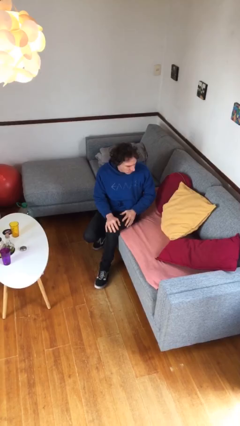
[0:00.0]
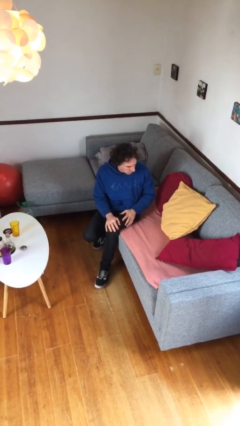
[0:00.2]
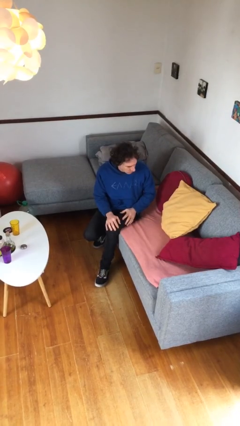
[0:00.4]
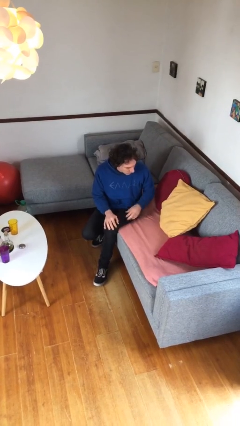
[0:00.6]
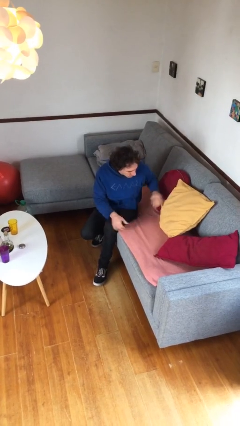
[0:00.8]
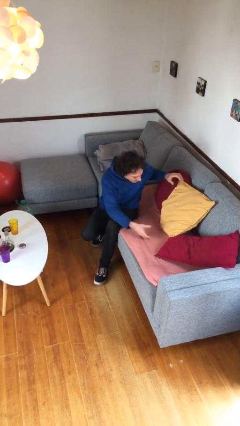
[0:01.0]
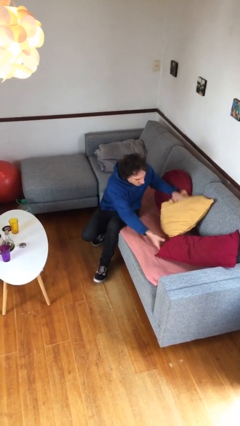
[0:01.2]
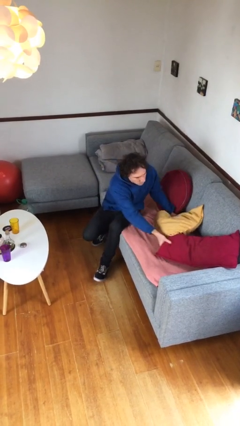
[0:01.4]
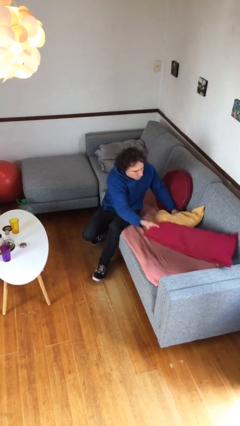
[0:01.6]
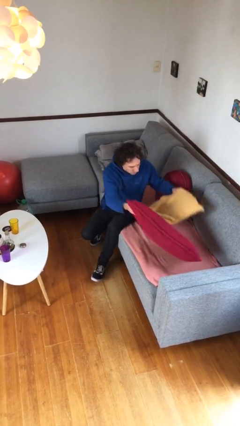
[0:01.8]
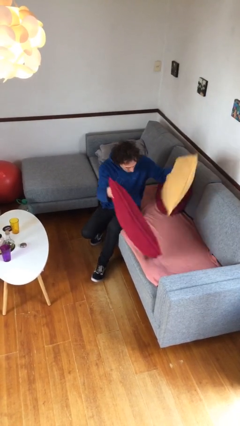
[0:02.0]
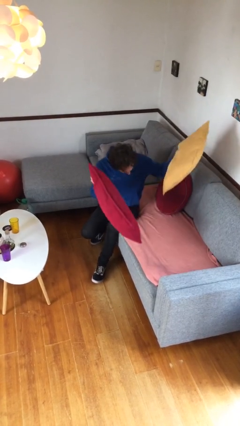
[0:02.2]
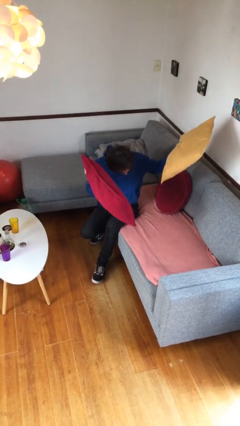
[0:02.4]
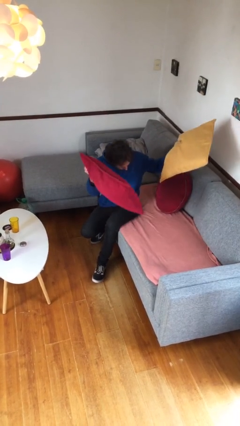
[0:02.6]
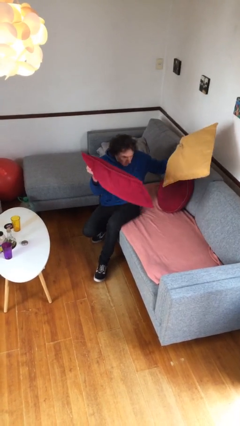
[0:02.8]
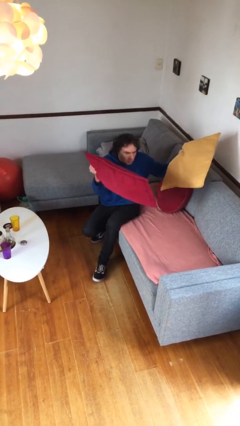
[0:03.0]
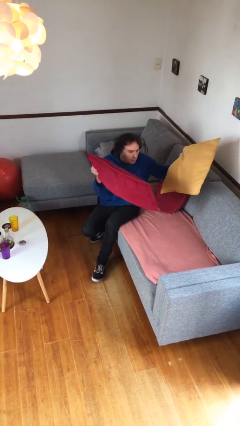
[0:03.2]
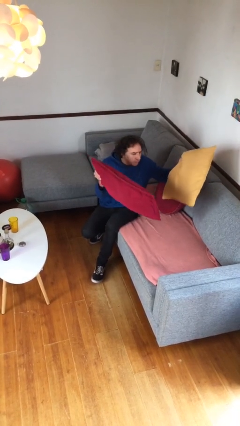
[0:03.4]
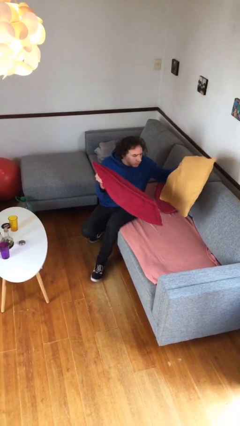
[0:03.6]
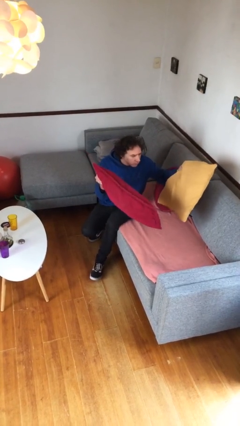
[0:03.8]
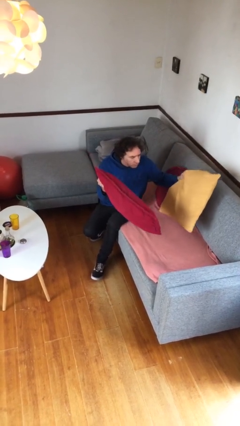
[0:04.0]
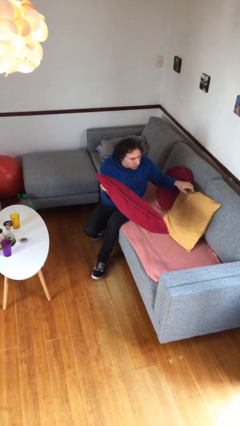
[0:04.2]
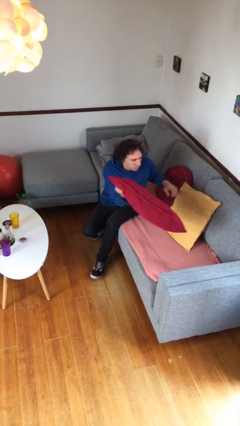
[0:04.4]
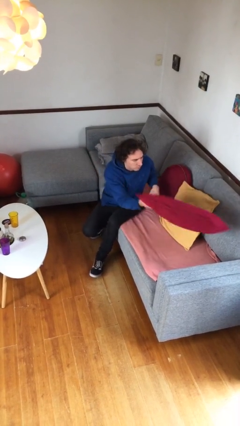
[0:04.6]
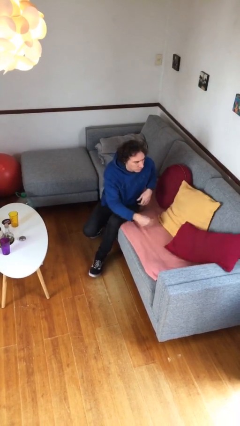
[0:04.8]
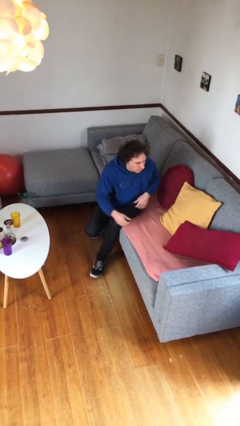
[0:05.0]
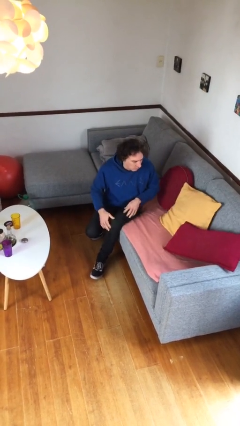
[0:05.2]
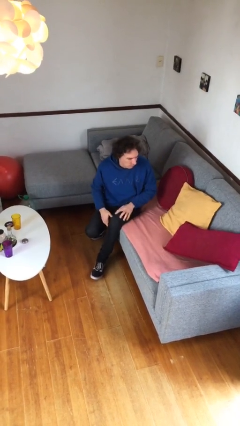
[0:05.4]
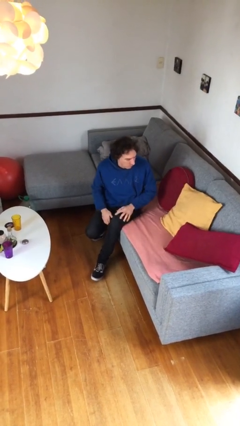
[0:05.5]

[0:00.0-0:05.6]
person searches in couch

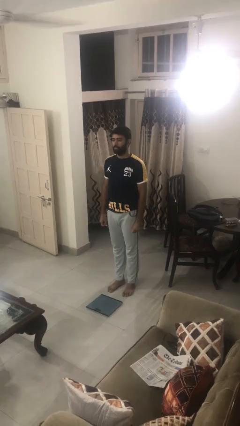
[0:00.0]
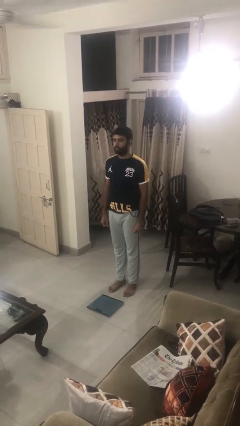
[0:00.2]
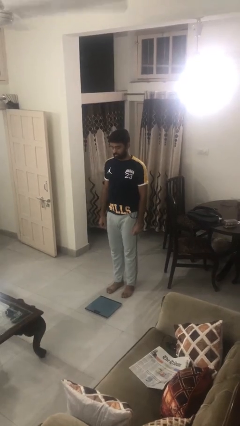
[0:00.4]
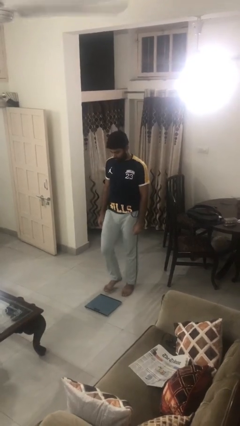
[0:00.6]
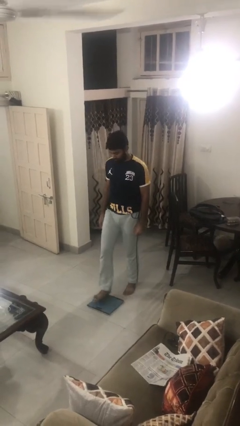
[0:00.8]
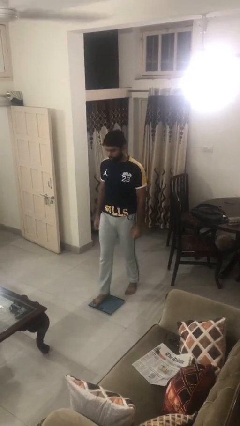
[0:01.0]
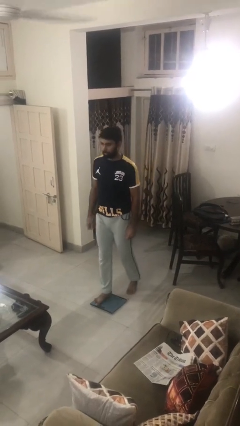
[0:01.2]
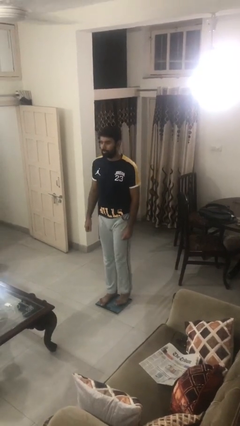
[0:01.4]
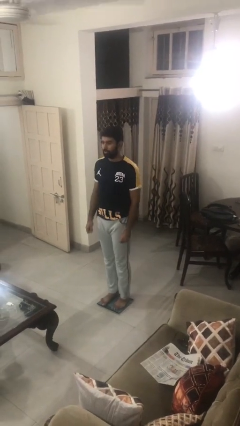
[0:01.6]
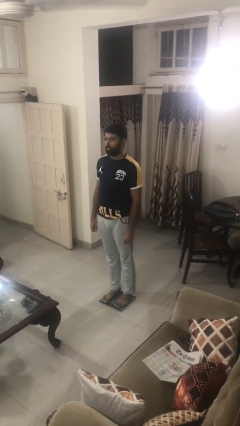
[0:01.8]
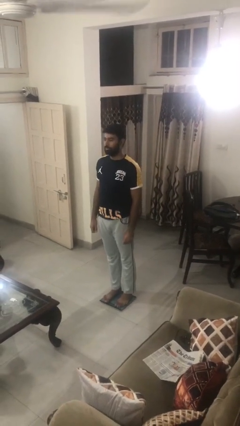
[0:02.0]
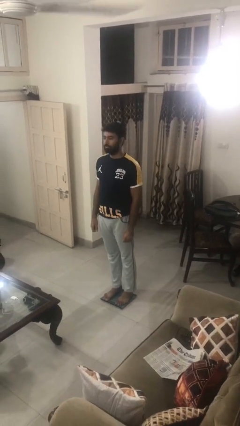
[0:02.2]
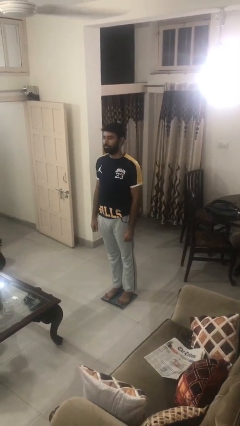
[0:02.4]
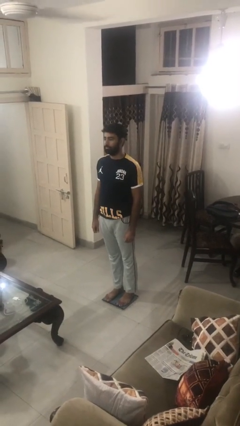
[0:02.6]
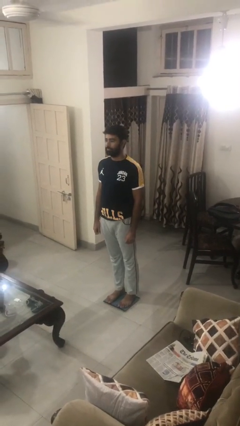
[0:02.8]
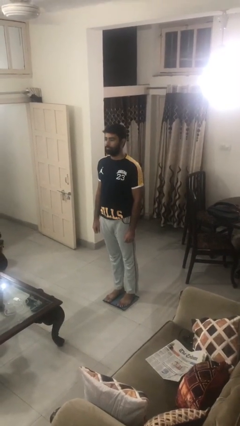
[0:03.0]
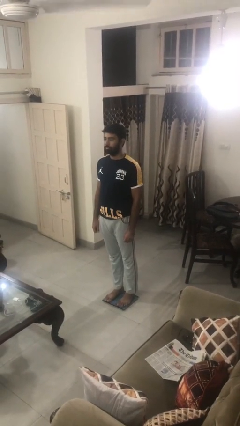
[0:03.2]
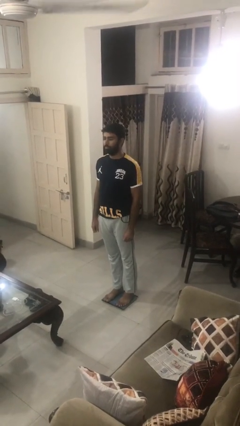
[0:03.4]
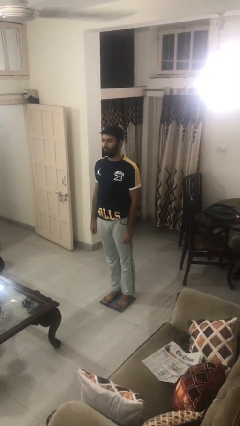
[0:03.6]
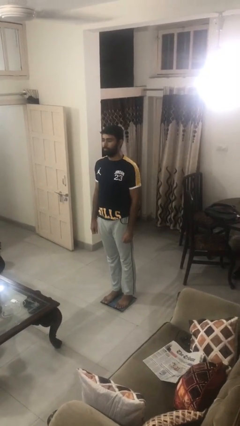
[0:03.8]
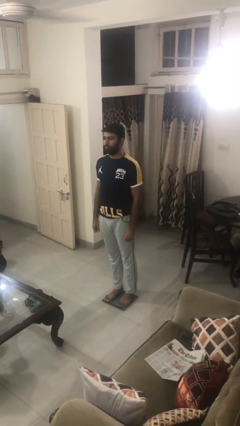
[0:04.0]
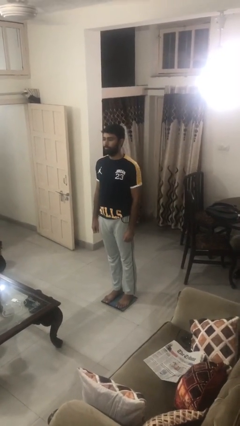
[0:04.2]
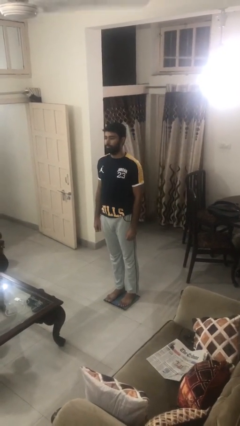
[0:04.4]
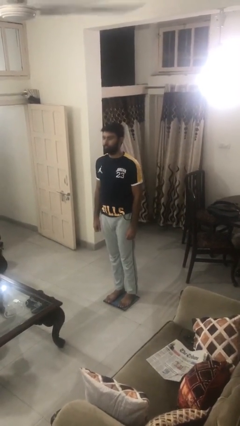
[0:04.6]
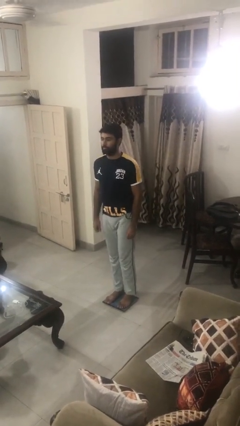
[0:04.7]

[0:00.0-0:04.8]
person uses bodyweight scale

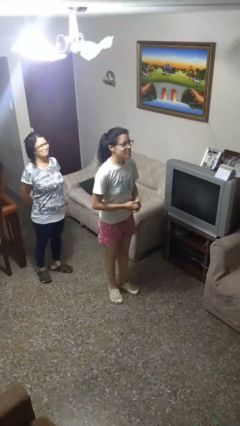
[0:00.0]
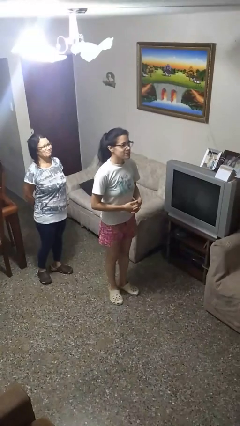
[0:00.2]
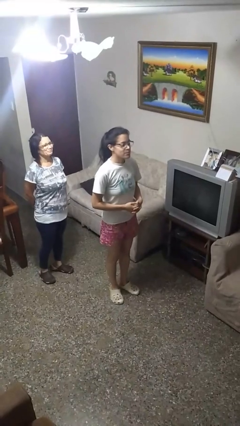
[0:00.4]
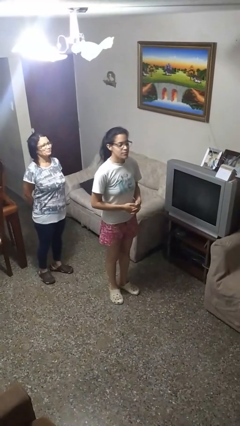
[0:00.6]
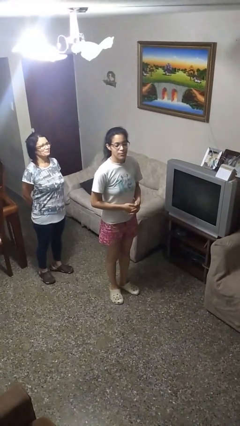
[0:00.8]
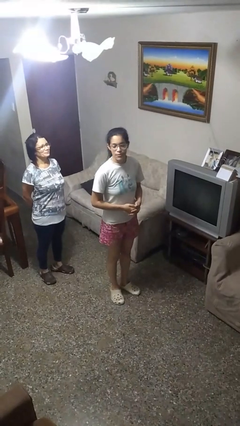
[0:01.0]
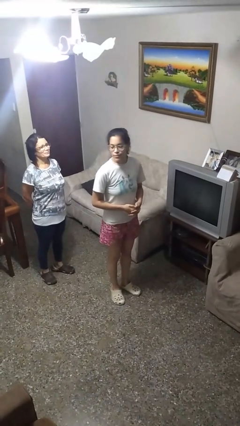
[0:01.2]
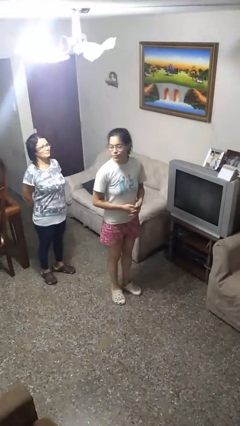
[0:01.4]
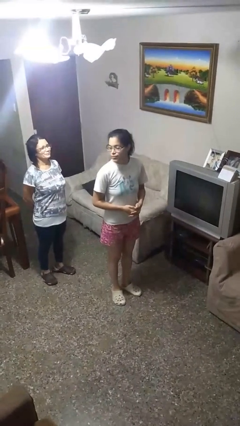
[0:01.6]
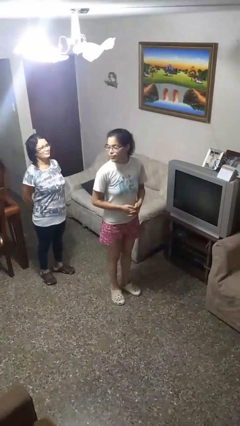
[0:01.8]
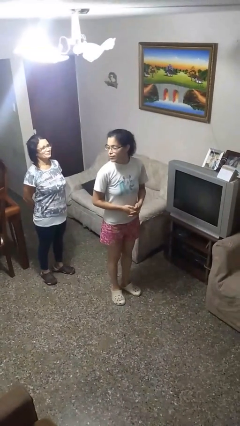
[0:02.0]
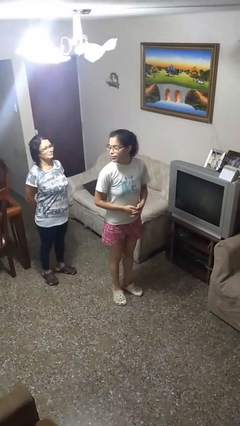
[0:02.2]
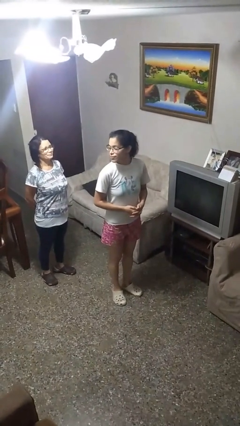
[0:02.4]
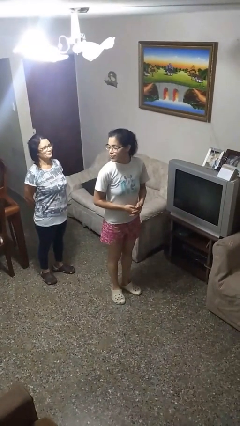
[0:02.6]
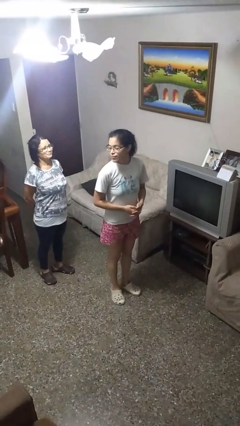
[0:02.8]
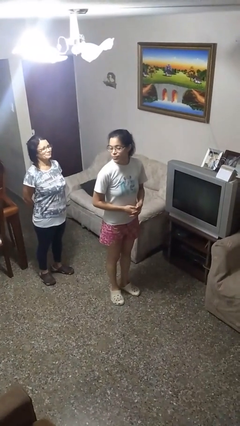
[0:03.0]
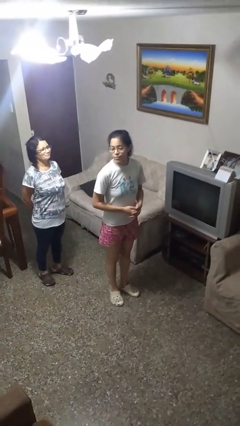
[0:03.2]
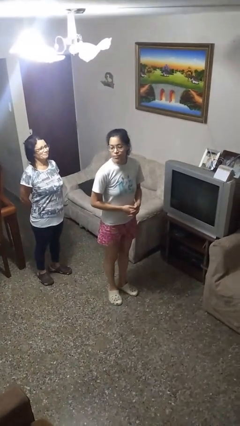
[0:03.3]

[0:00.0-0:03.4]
person looks over shoulder

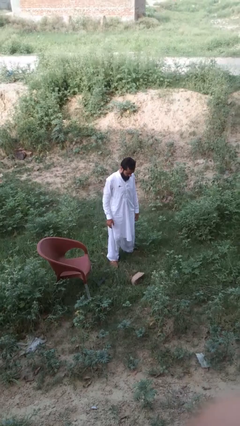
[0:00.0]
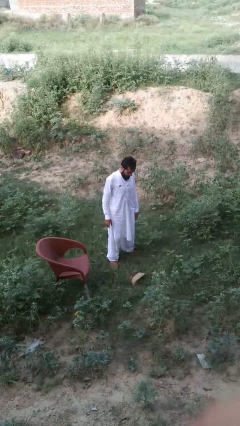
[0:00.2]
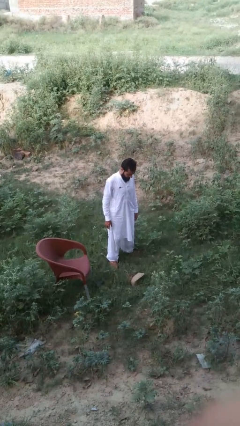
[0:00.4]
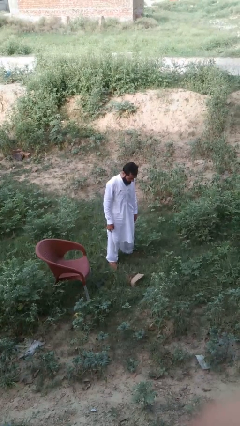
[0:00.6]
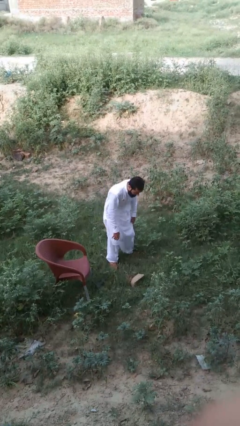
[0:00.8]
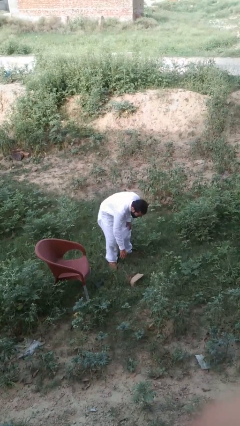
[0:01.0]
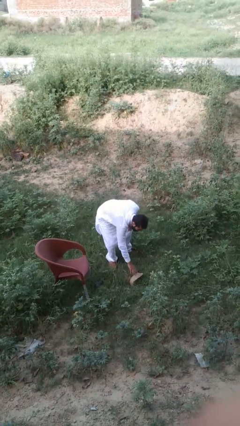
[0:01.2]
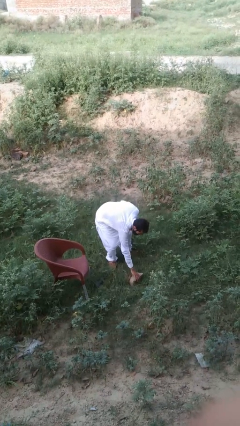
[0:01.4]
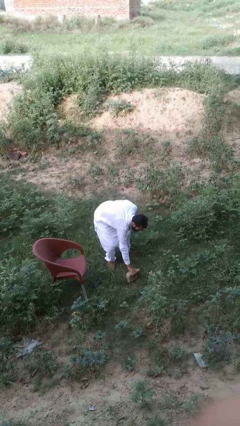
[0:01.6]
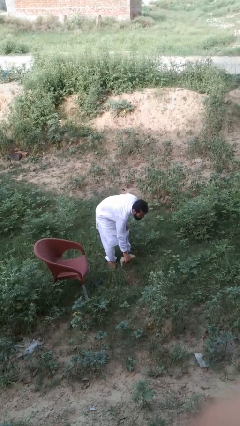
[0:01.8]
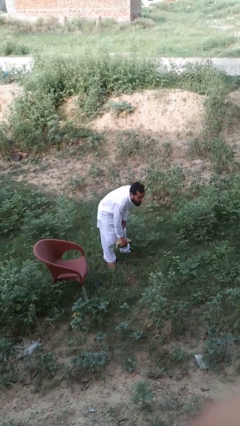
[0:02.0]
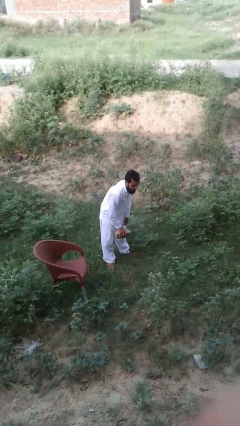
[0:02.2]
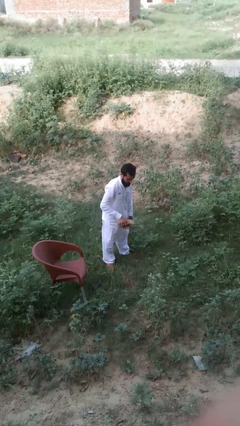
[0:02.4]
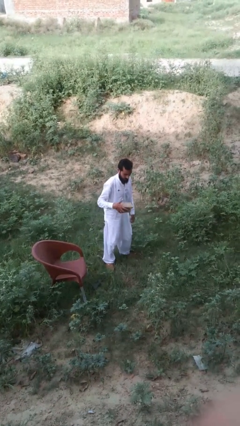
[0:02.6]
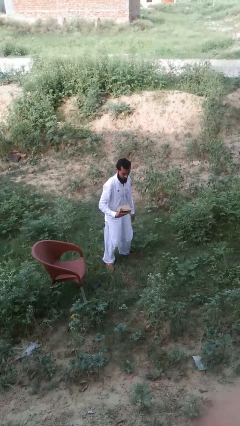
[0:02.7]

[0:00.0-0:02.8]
person picks up object from floor

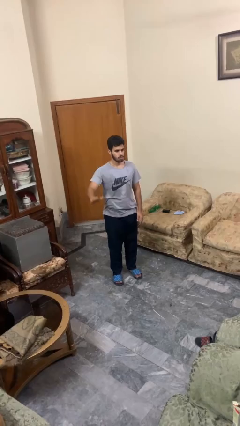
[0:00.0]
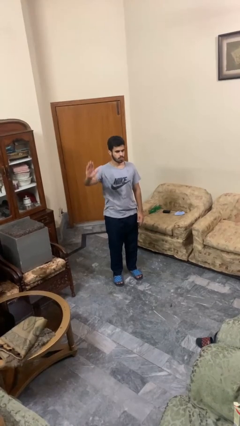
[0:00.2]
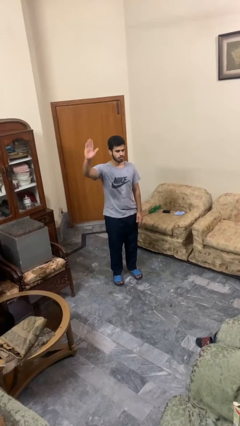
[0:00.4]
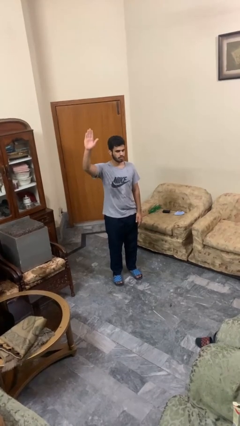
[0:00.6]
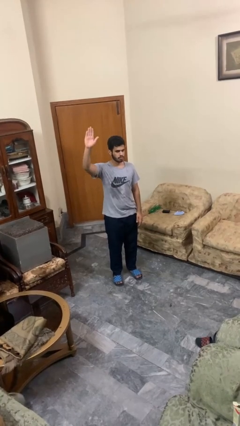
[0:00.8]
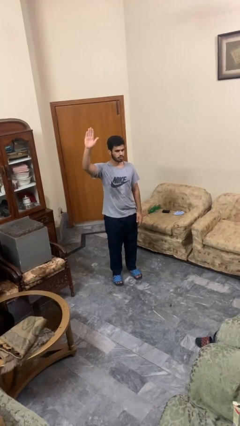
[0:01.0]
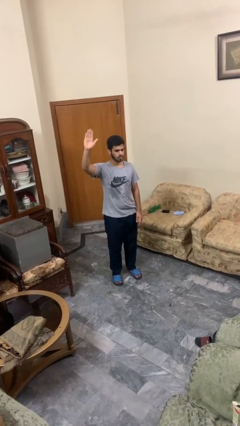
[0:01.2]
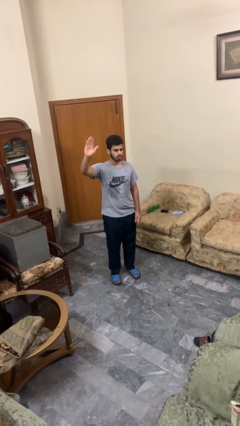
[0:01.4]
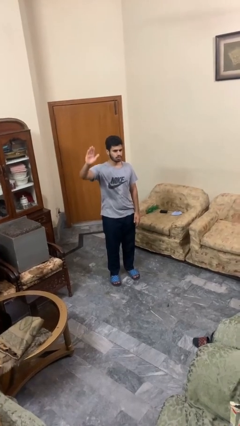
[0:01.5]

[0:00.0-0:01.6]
person gestures raise hand
